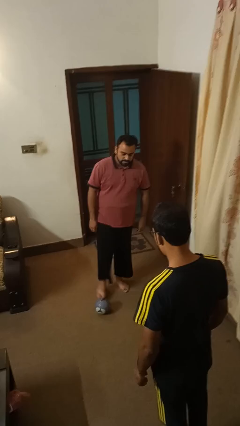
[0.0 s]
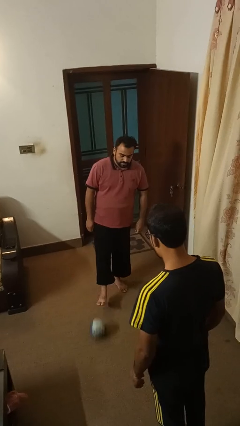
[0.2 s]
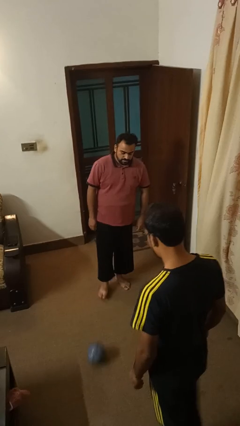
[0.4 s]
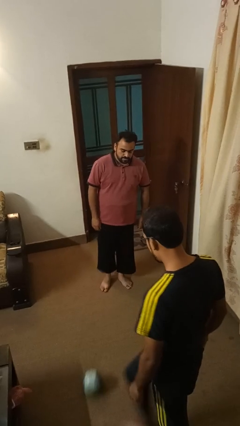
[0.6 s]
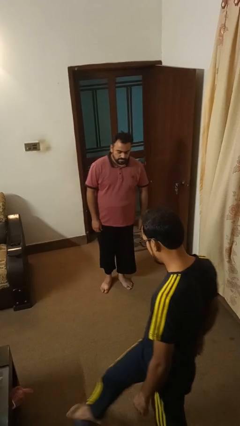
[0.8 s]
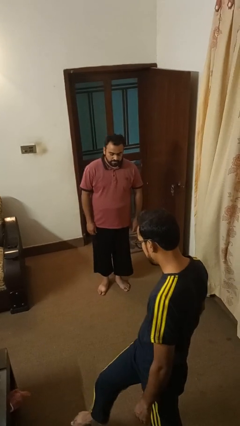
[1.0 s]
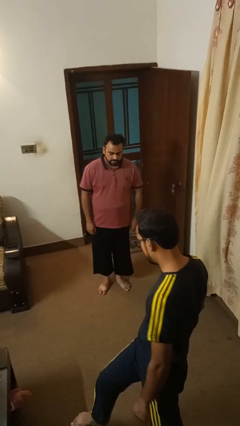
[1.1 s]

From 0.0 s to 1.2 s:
person kicks object to person

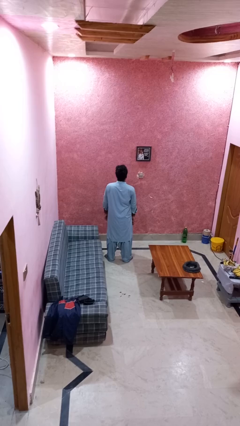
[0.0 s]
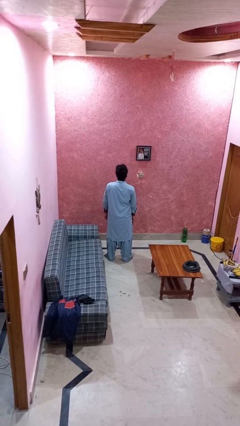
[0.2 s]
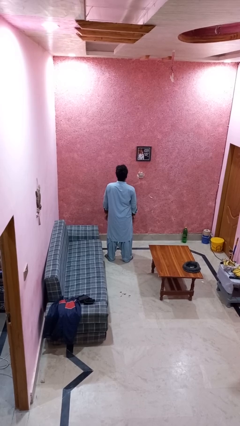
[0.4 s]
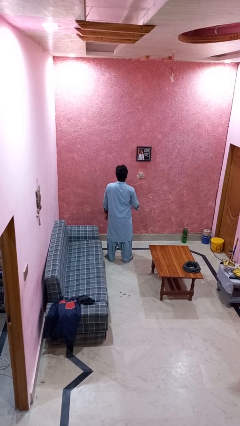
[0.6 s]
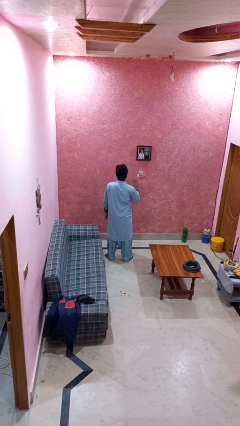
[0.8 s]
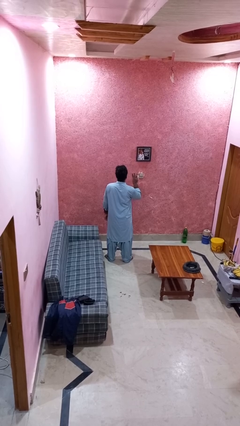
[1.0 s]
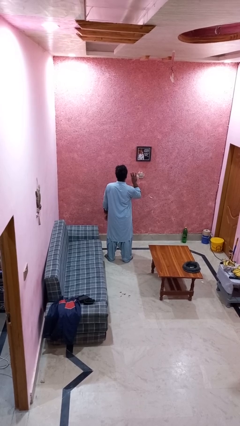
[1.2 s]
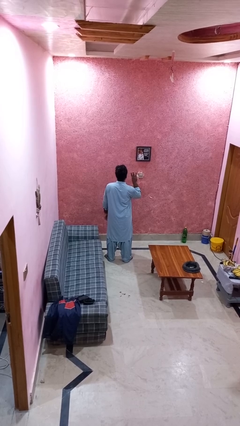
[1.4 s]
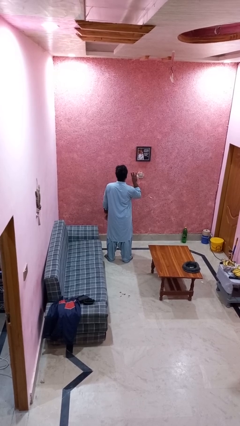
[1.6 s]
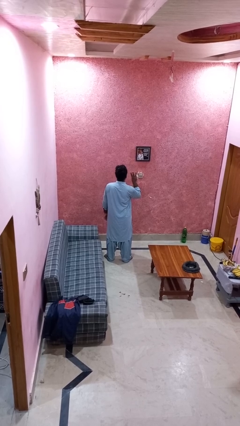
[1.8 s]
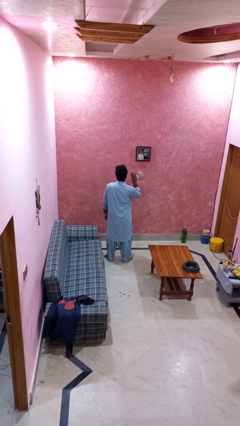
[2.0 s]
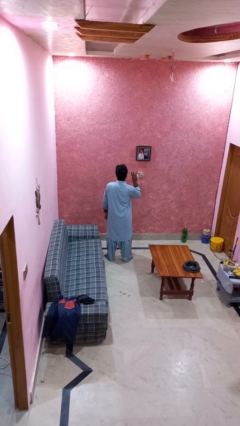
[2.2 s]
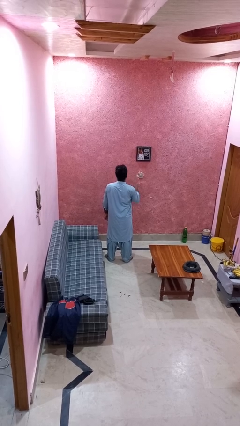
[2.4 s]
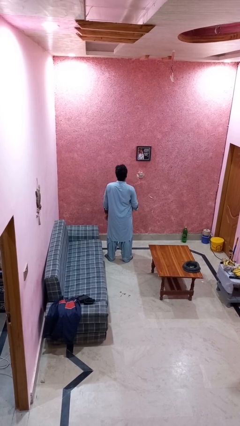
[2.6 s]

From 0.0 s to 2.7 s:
person gestures number three

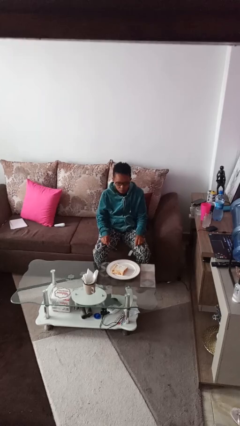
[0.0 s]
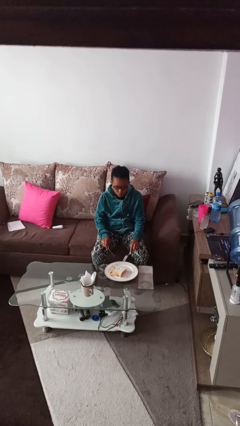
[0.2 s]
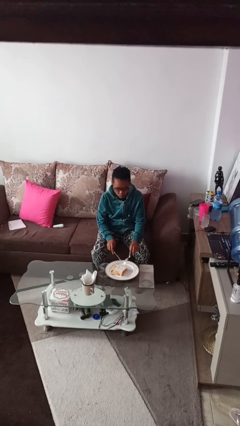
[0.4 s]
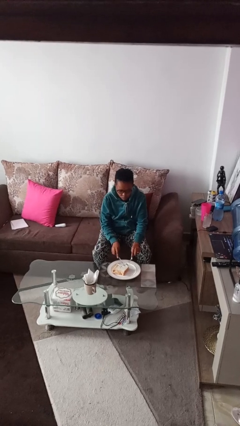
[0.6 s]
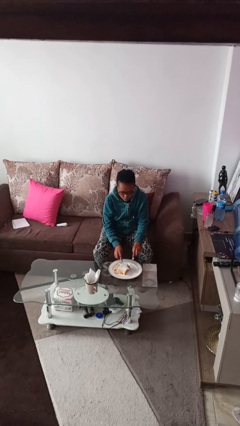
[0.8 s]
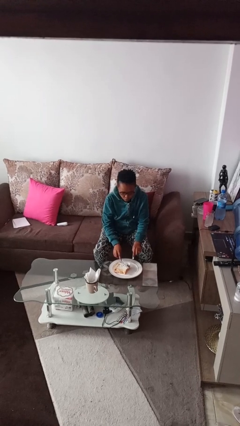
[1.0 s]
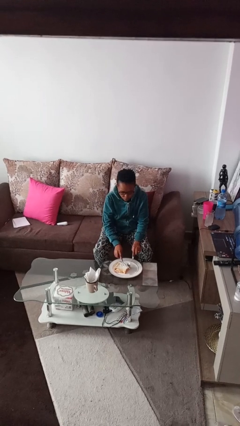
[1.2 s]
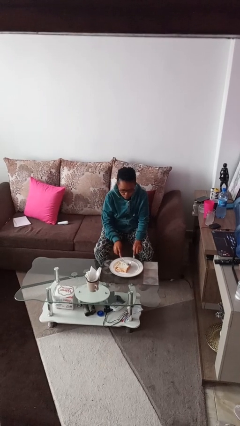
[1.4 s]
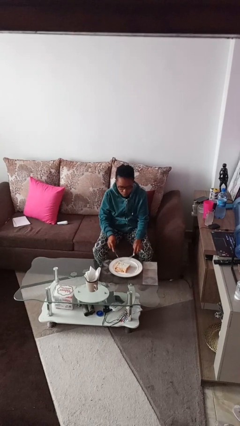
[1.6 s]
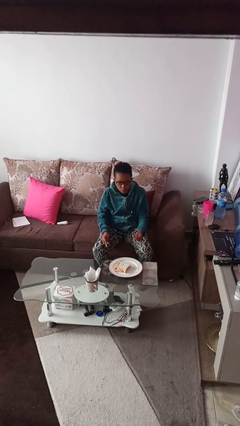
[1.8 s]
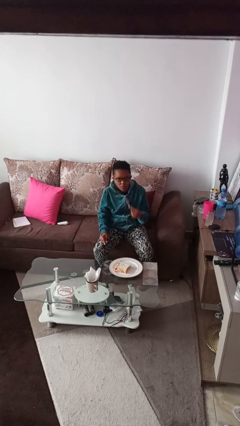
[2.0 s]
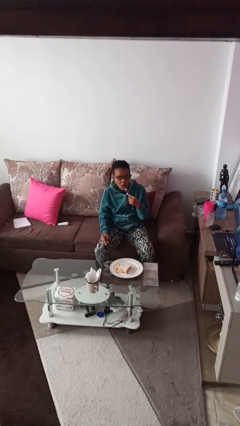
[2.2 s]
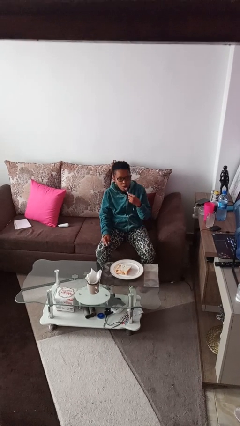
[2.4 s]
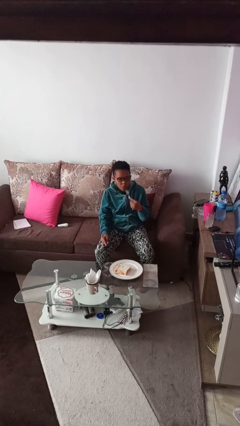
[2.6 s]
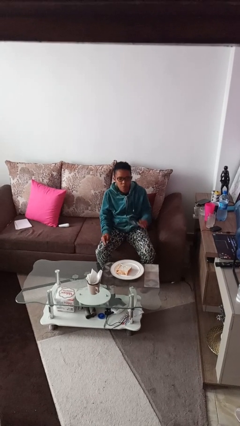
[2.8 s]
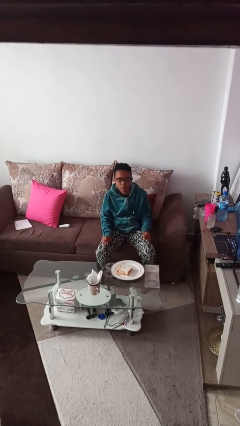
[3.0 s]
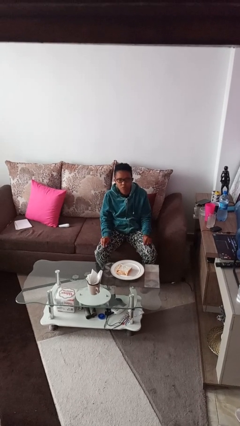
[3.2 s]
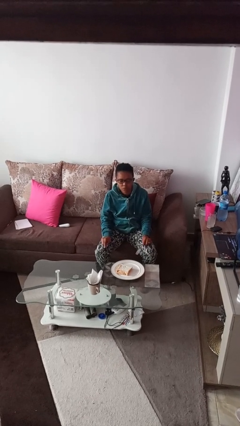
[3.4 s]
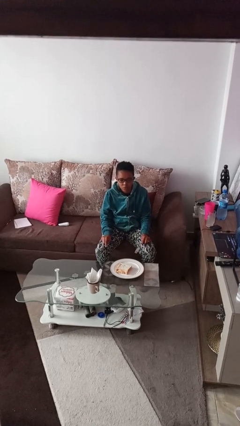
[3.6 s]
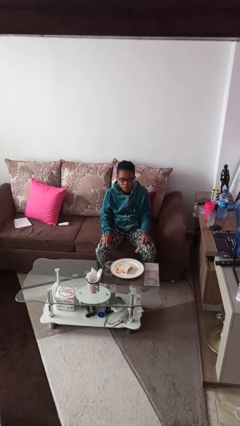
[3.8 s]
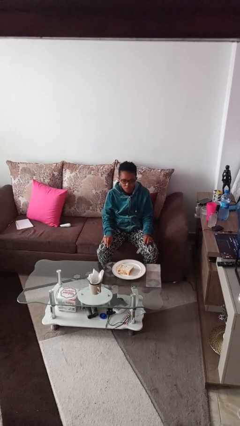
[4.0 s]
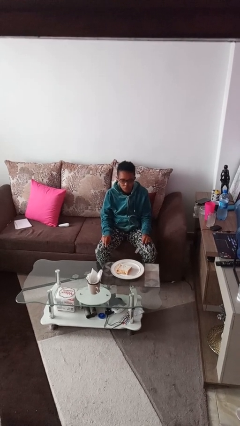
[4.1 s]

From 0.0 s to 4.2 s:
person eats with utensil

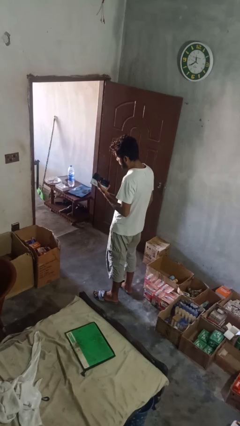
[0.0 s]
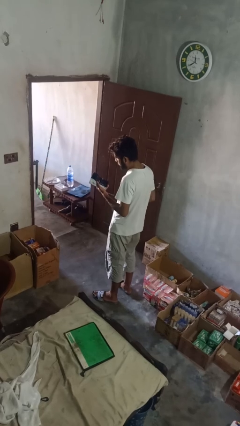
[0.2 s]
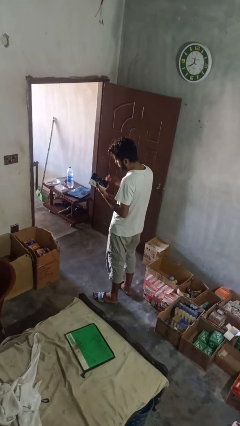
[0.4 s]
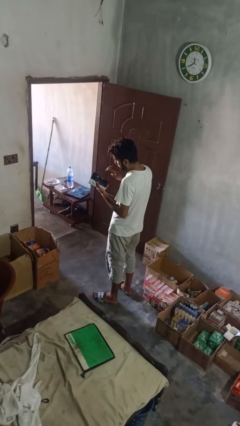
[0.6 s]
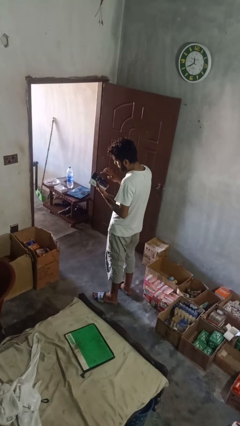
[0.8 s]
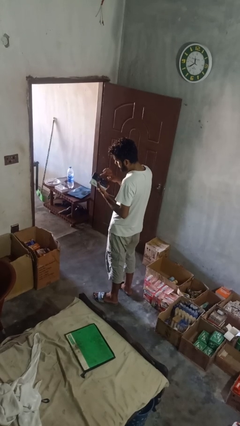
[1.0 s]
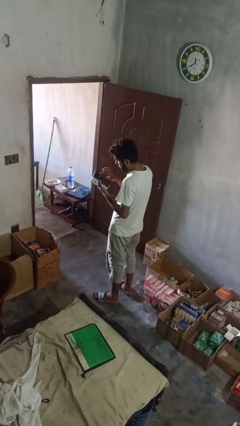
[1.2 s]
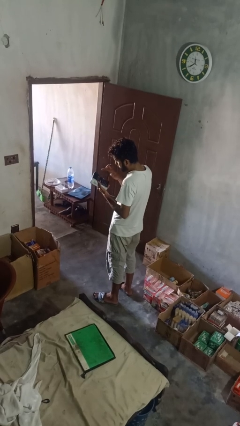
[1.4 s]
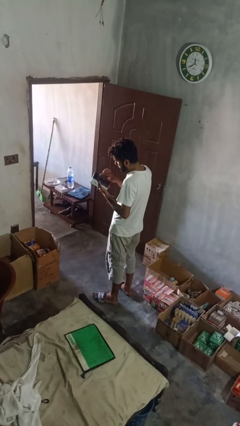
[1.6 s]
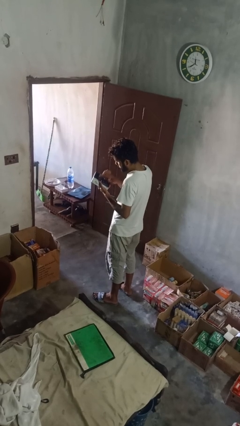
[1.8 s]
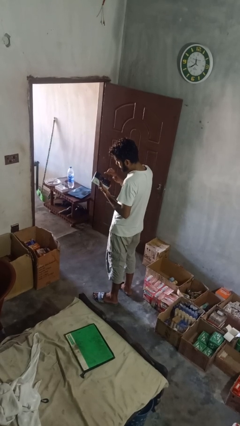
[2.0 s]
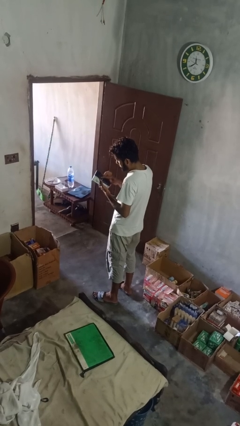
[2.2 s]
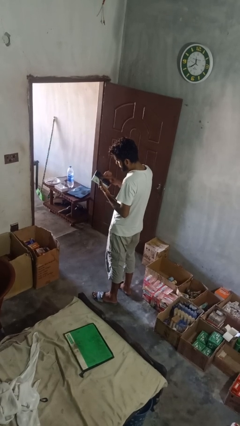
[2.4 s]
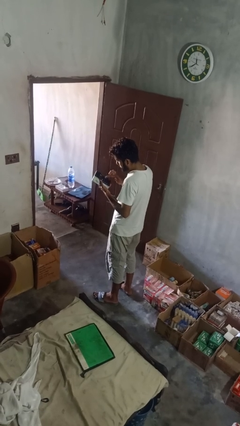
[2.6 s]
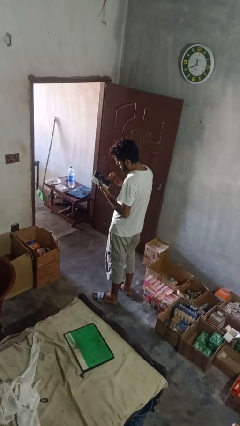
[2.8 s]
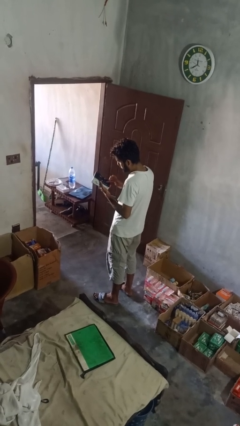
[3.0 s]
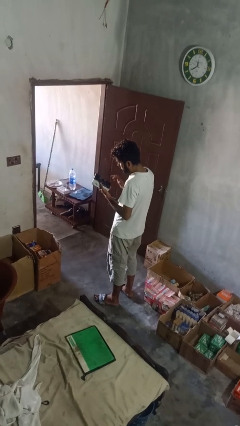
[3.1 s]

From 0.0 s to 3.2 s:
person interacts with tablet

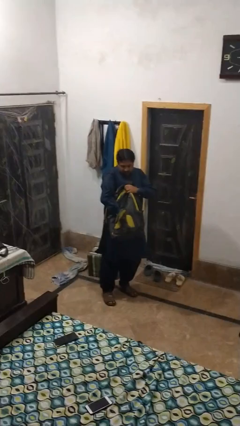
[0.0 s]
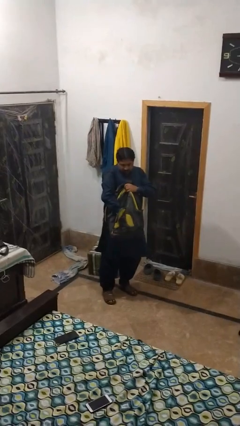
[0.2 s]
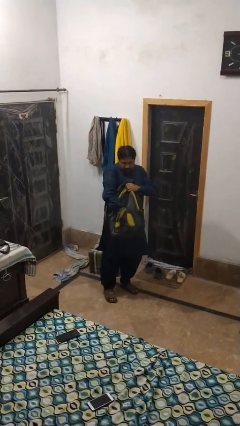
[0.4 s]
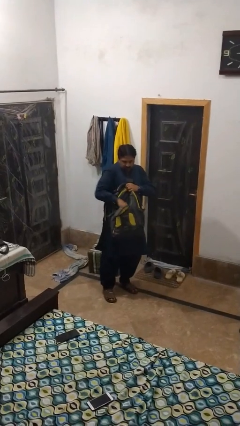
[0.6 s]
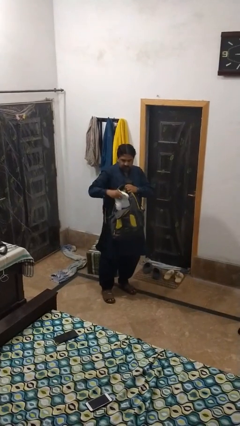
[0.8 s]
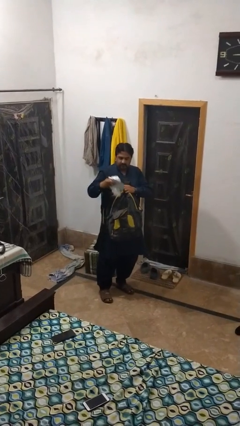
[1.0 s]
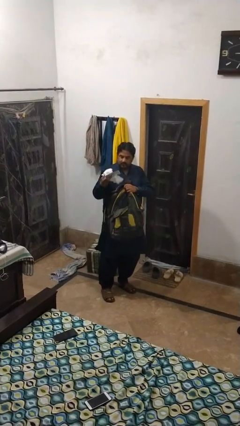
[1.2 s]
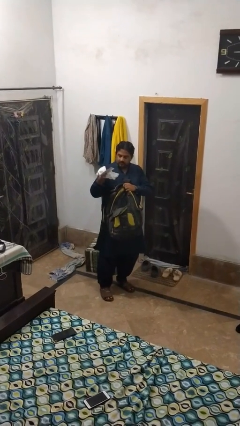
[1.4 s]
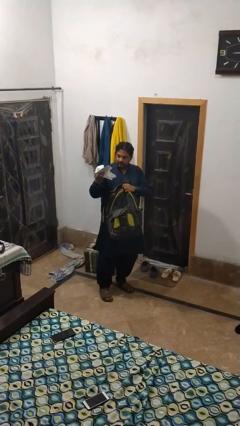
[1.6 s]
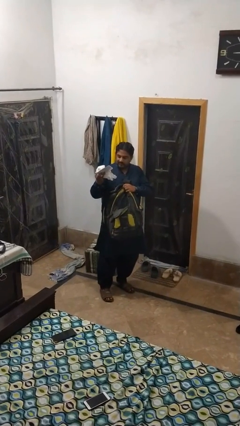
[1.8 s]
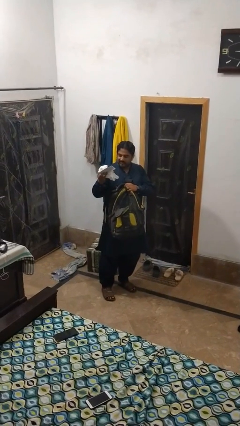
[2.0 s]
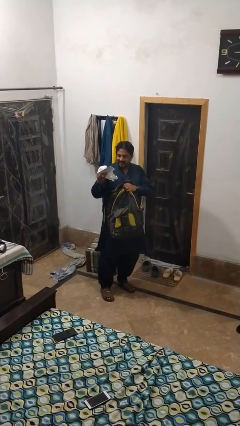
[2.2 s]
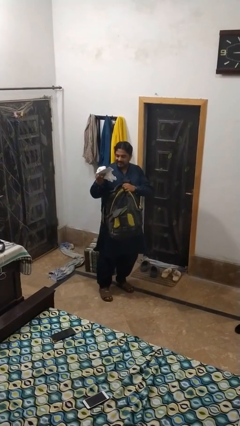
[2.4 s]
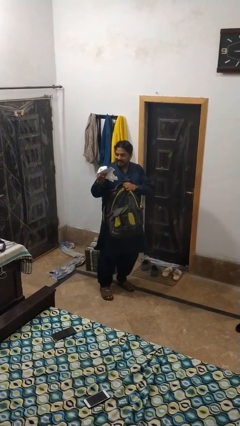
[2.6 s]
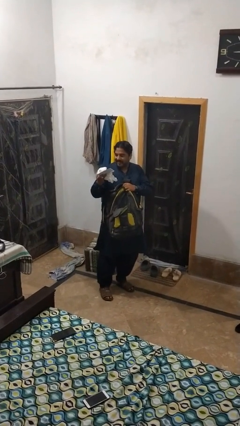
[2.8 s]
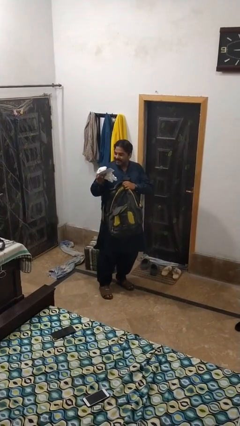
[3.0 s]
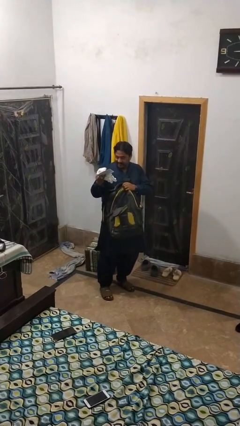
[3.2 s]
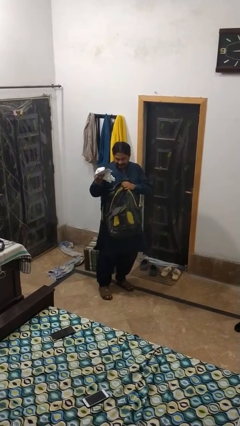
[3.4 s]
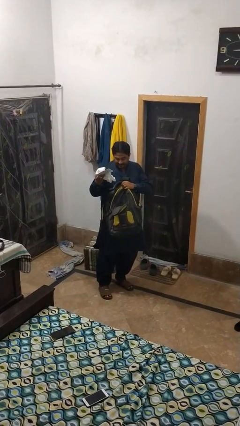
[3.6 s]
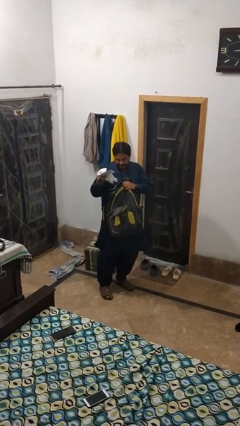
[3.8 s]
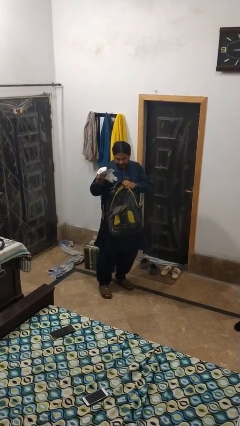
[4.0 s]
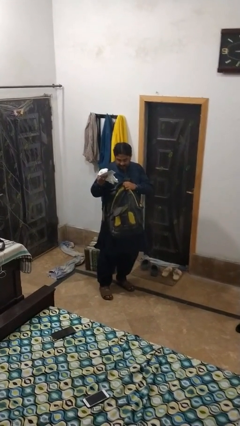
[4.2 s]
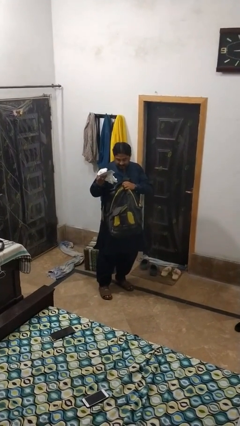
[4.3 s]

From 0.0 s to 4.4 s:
person takes object from backpack

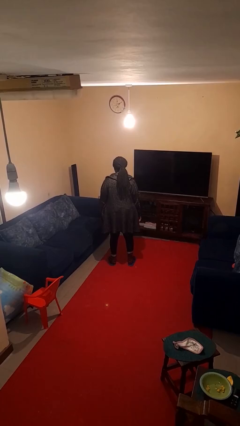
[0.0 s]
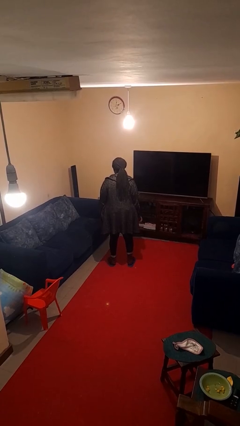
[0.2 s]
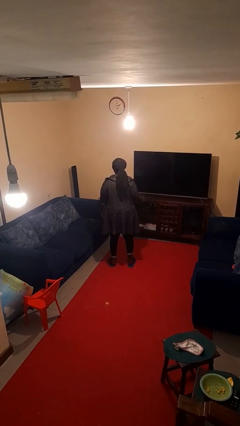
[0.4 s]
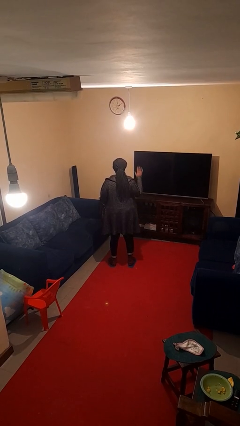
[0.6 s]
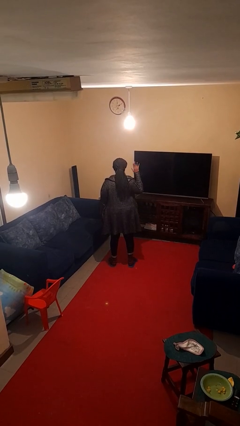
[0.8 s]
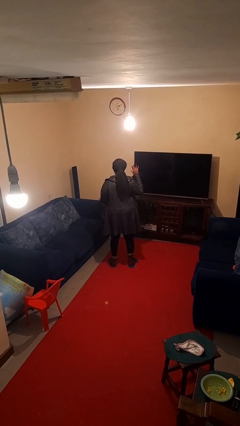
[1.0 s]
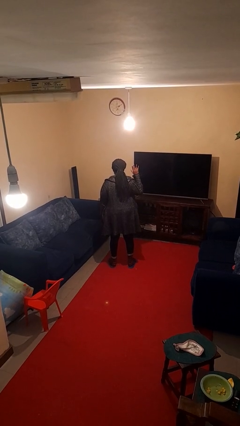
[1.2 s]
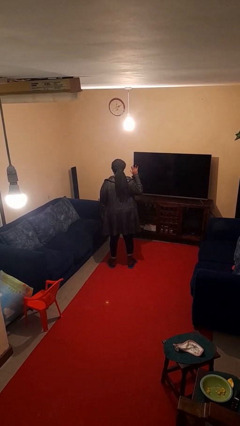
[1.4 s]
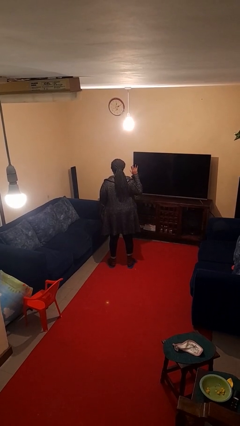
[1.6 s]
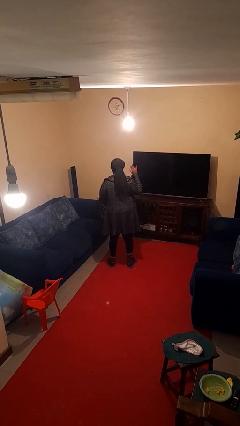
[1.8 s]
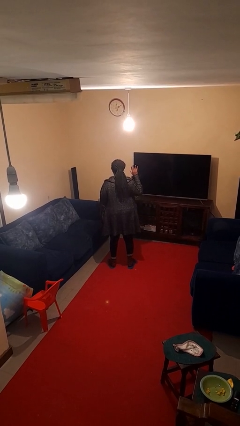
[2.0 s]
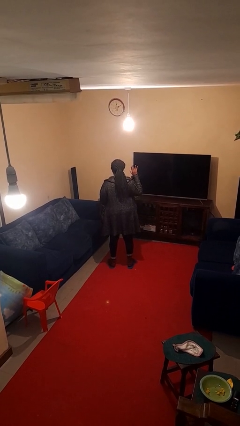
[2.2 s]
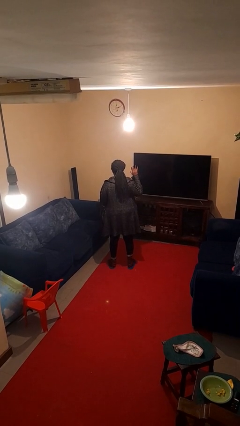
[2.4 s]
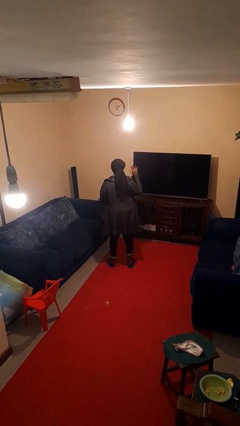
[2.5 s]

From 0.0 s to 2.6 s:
person gestures number five
